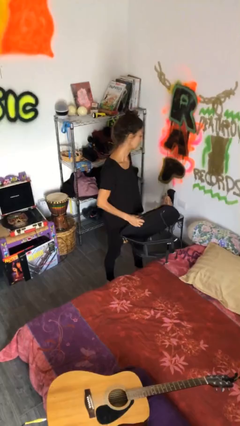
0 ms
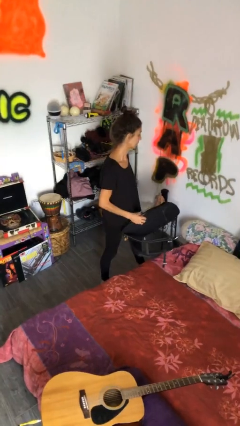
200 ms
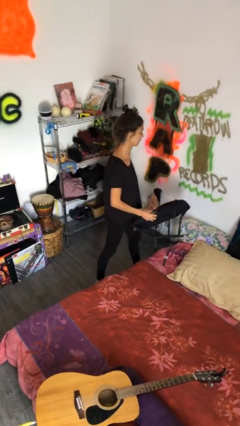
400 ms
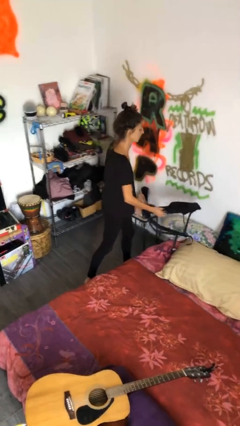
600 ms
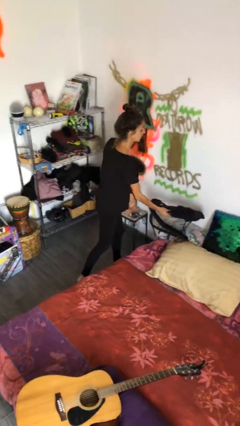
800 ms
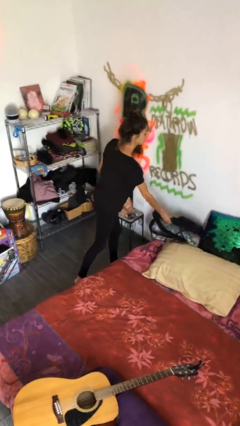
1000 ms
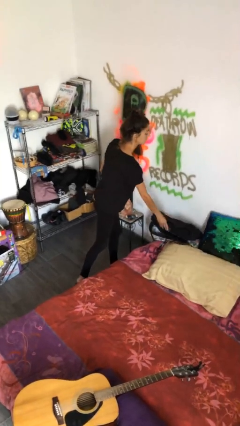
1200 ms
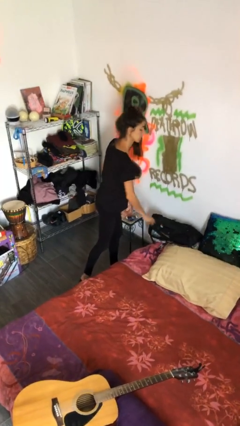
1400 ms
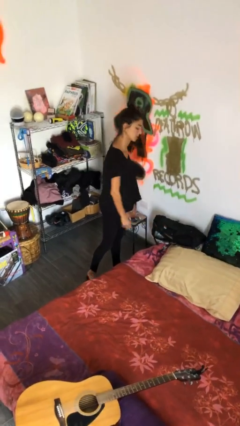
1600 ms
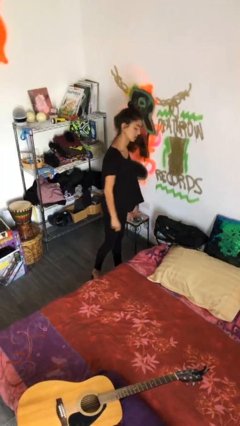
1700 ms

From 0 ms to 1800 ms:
person puts down object on bed

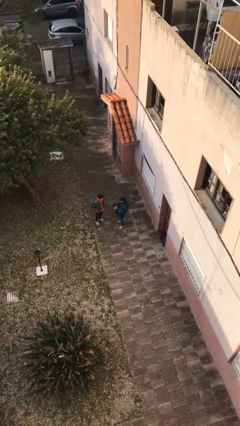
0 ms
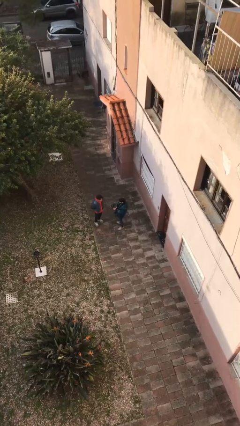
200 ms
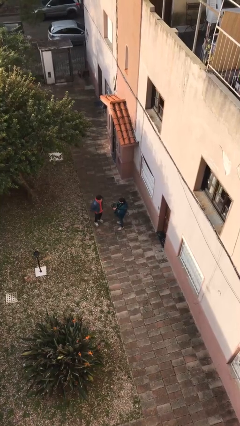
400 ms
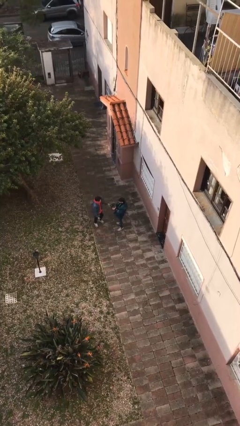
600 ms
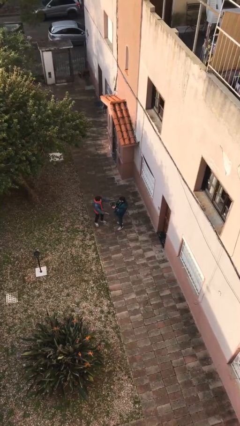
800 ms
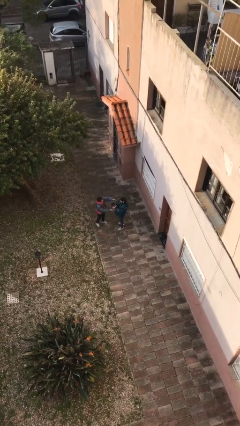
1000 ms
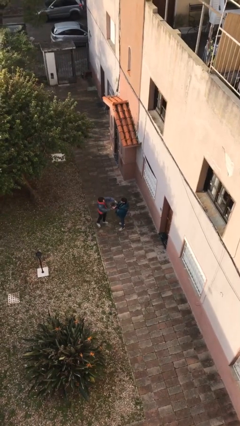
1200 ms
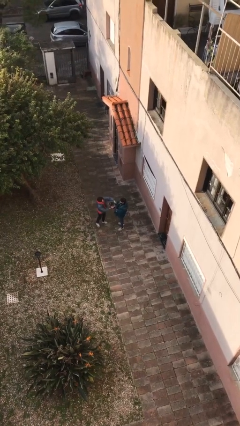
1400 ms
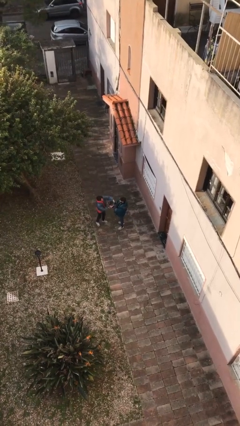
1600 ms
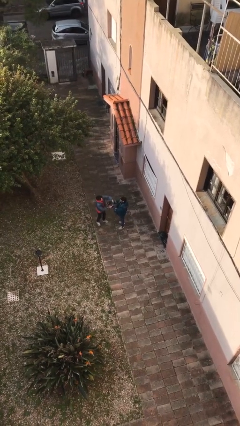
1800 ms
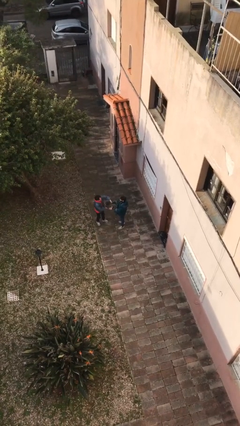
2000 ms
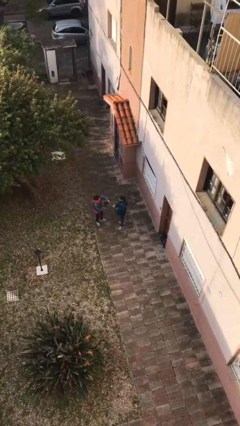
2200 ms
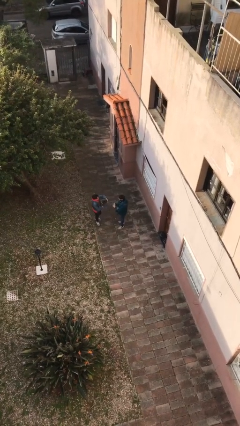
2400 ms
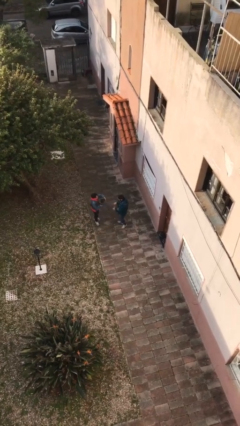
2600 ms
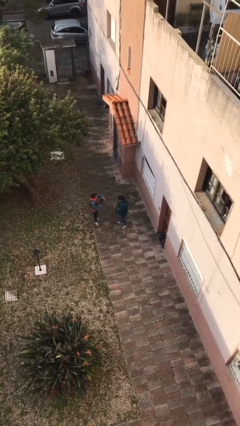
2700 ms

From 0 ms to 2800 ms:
person transfers object to person

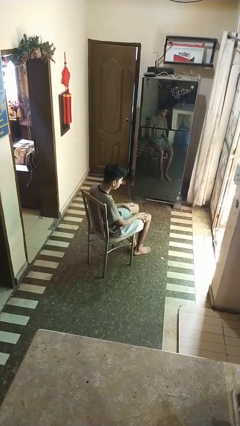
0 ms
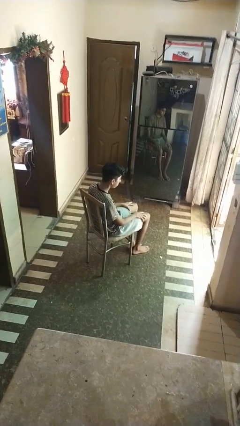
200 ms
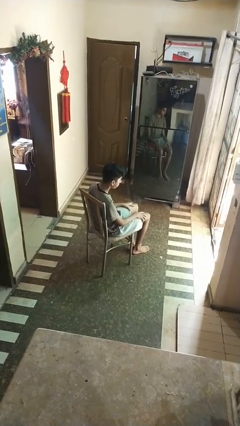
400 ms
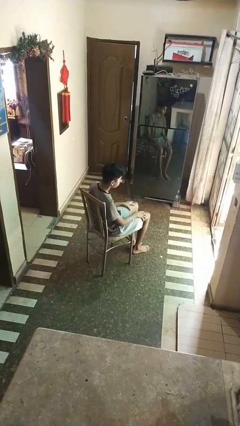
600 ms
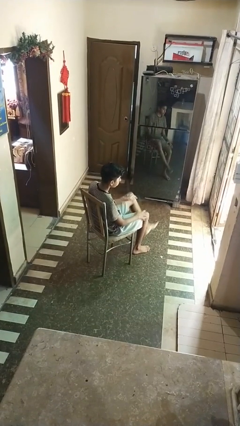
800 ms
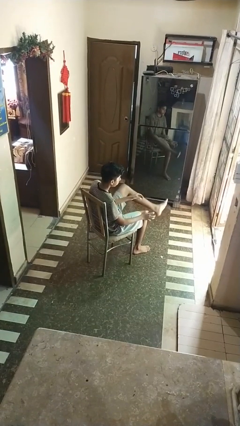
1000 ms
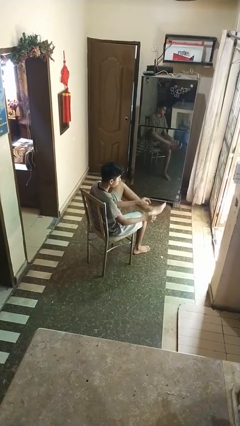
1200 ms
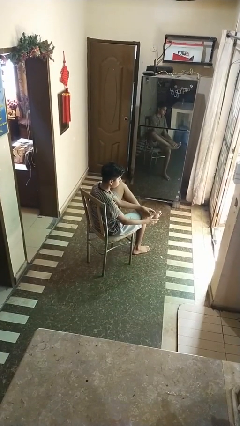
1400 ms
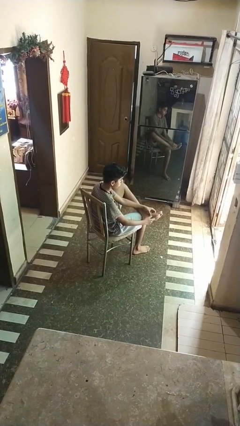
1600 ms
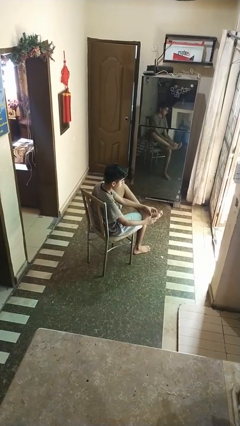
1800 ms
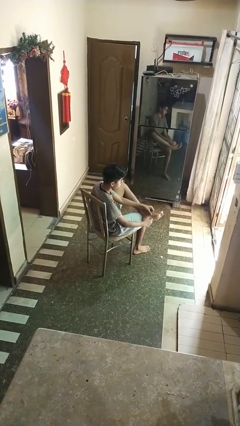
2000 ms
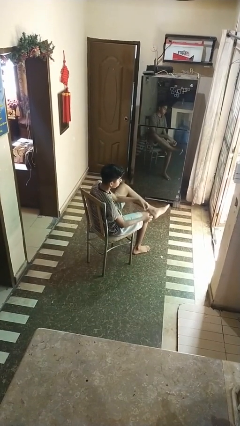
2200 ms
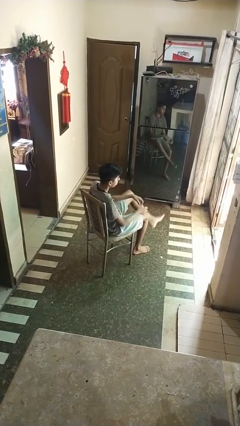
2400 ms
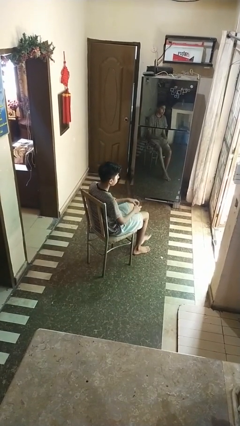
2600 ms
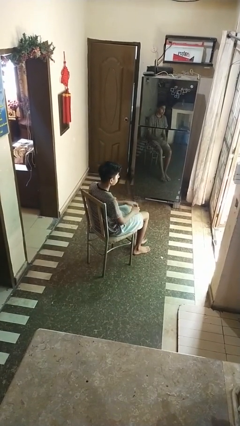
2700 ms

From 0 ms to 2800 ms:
person rubs foot

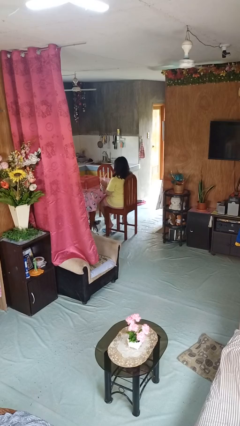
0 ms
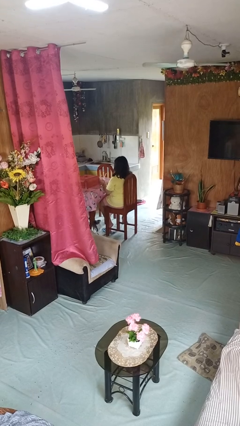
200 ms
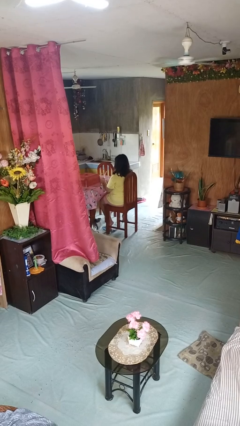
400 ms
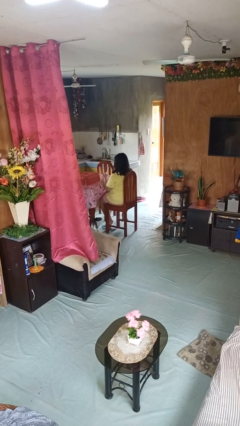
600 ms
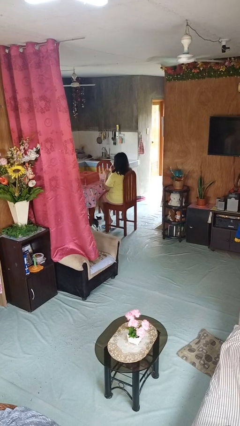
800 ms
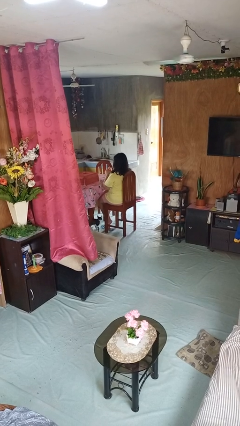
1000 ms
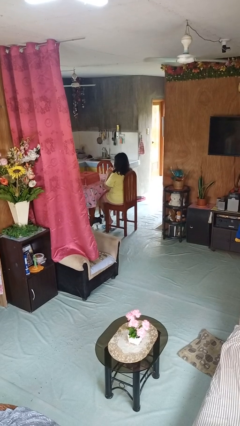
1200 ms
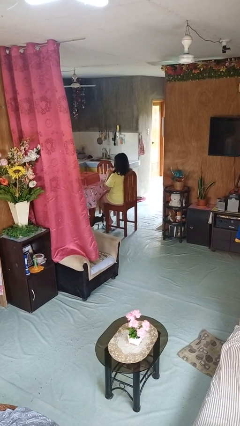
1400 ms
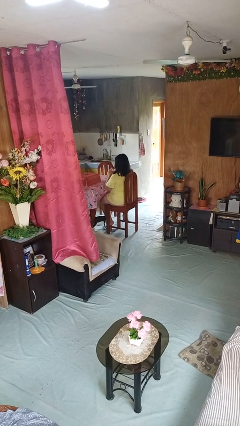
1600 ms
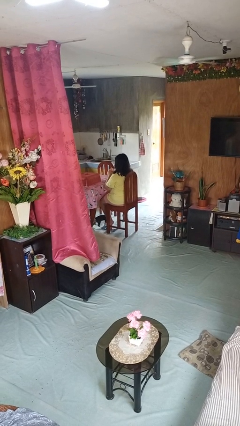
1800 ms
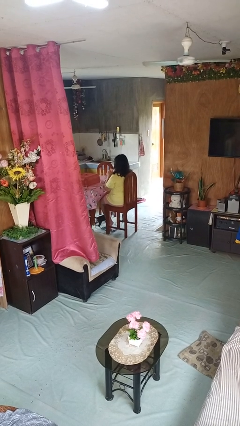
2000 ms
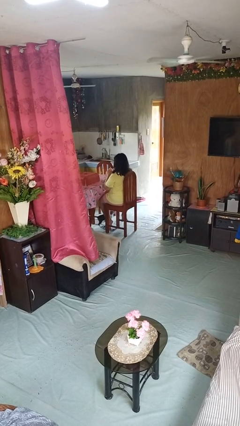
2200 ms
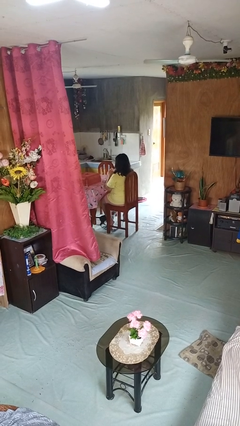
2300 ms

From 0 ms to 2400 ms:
person drinks from straw

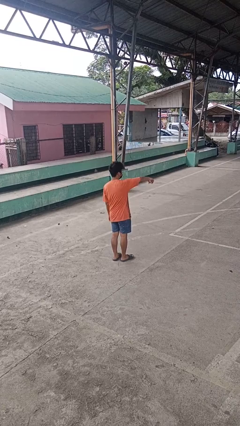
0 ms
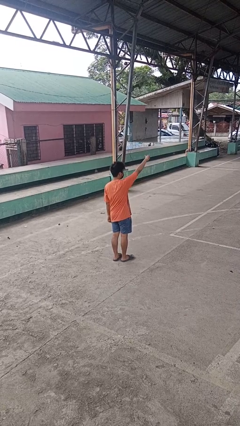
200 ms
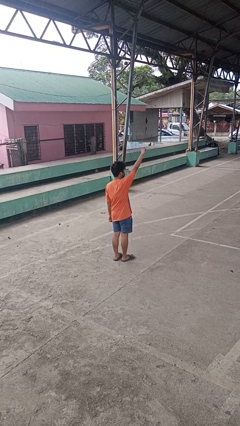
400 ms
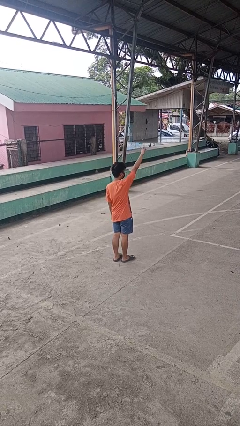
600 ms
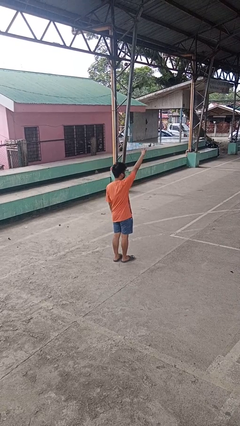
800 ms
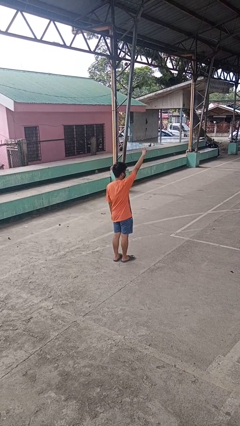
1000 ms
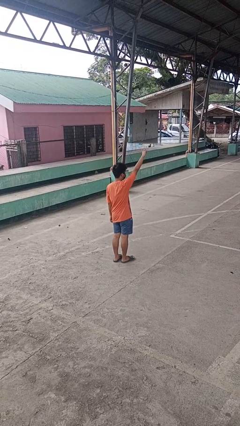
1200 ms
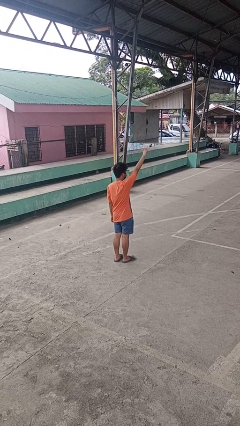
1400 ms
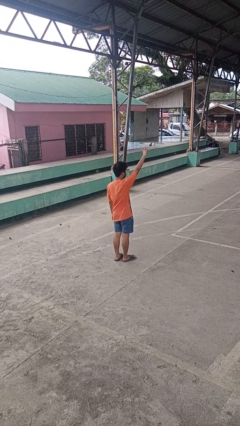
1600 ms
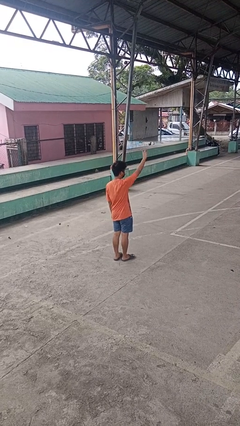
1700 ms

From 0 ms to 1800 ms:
person gestures swipe up

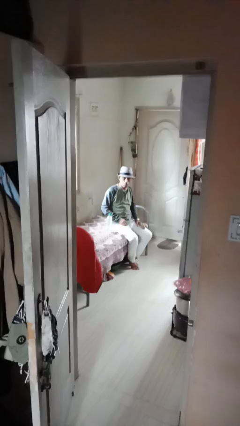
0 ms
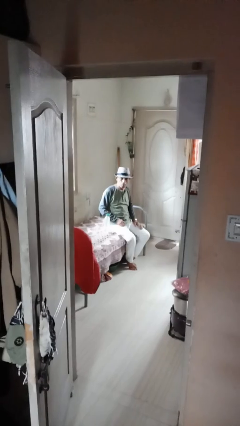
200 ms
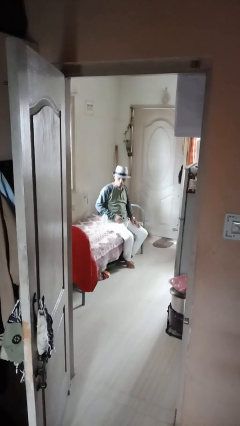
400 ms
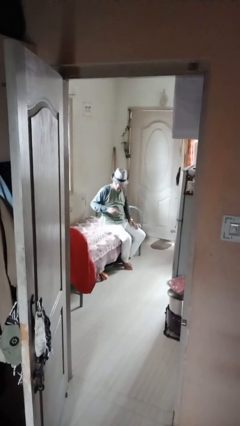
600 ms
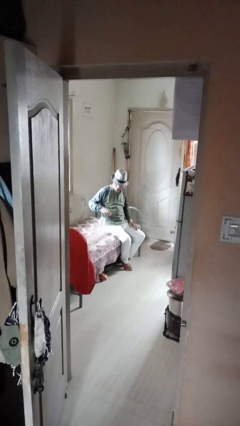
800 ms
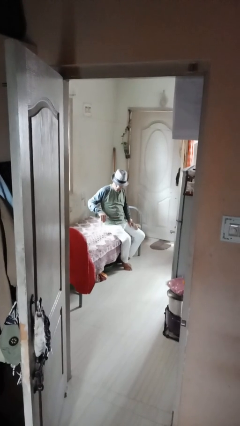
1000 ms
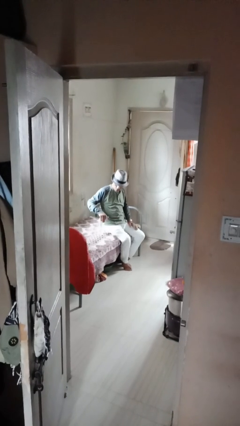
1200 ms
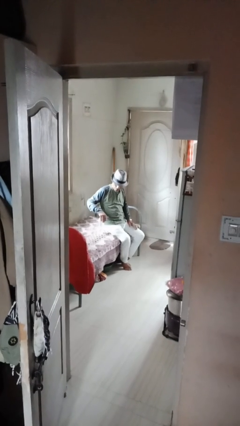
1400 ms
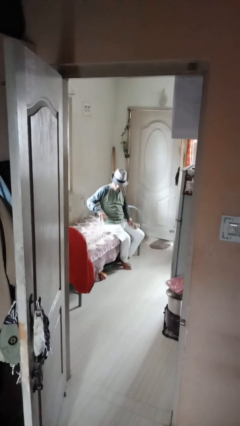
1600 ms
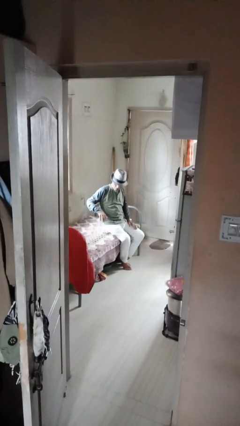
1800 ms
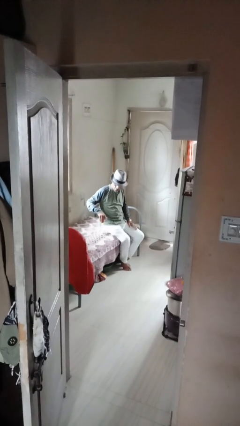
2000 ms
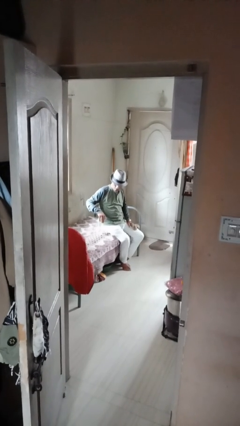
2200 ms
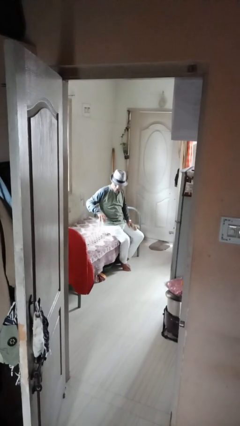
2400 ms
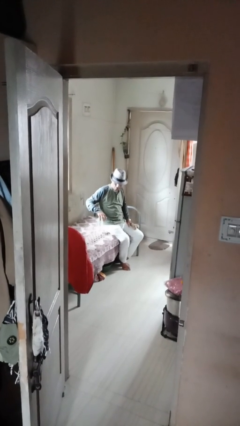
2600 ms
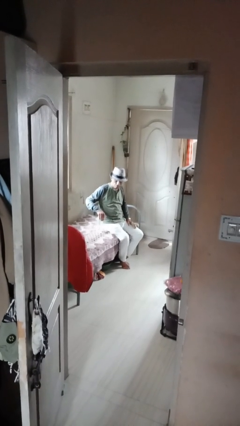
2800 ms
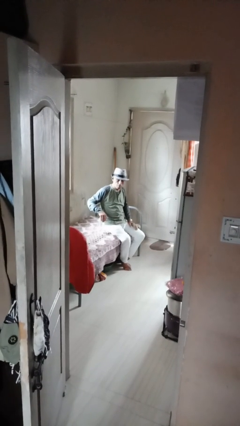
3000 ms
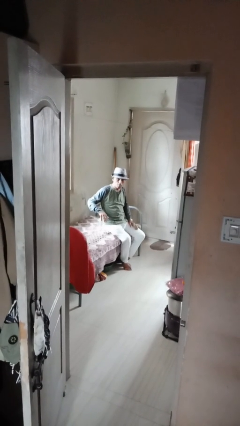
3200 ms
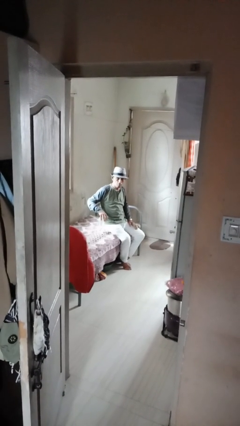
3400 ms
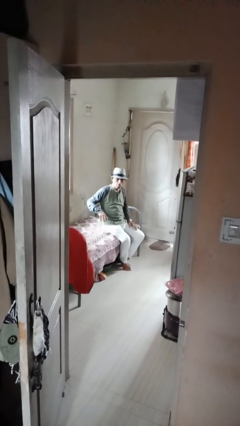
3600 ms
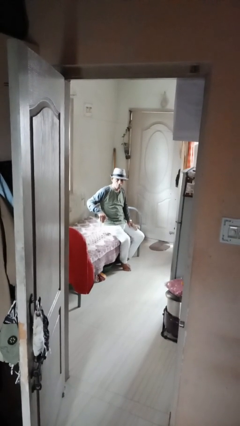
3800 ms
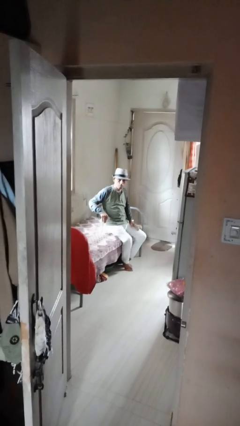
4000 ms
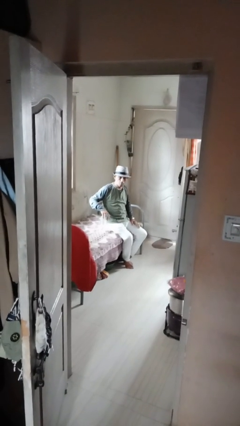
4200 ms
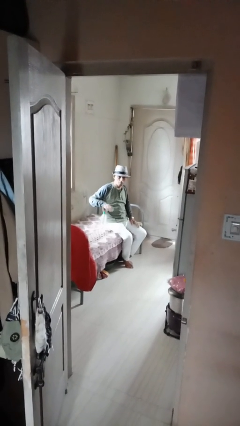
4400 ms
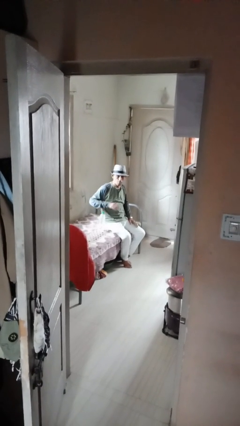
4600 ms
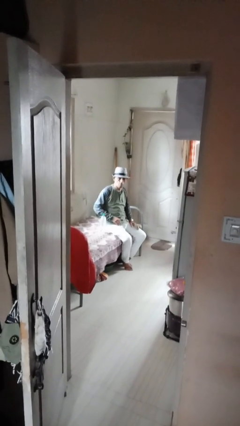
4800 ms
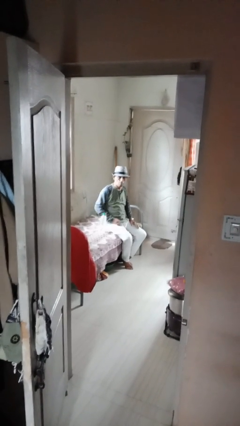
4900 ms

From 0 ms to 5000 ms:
person taps object with finger

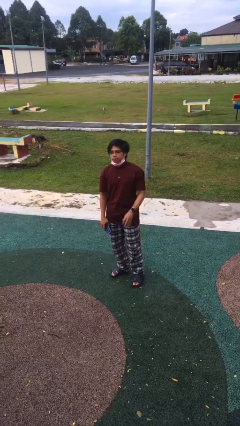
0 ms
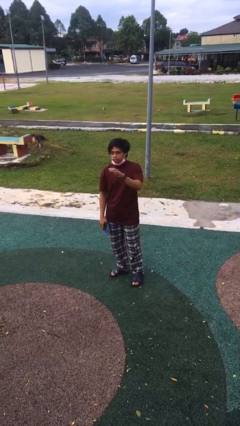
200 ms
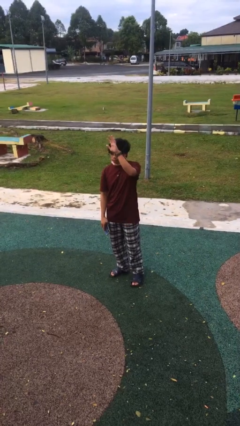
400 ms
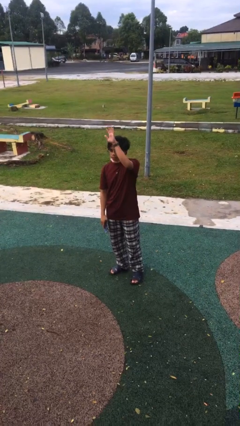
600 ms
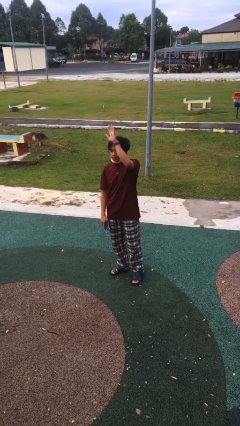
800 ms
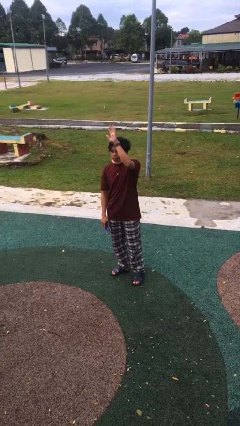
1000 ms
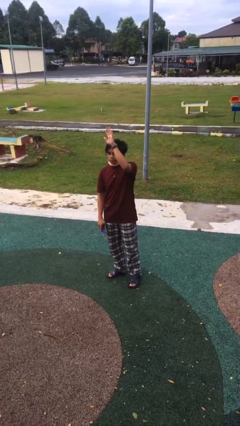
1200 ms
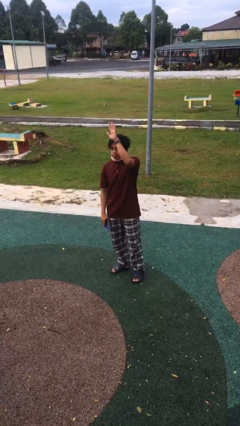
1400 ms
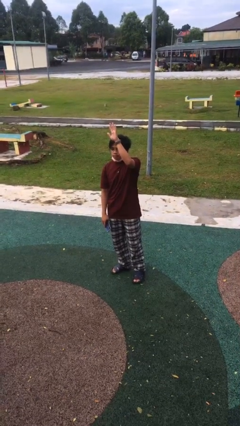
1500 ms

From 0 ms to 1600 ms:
person gestures raise hand
